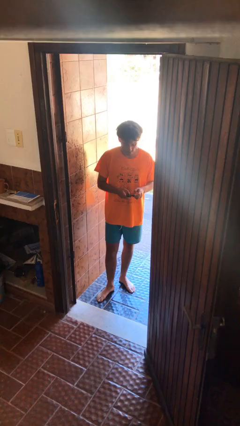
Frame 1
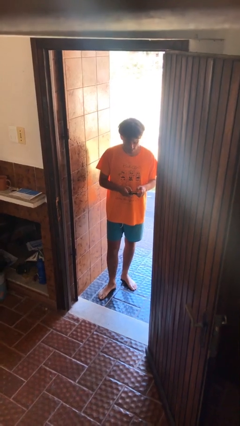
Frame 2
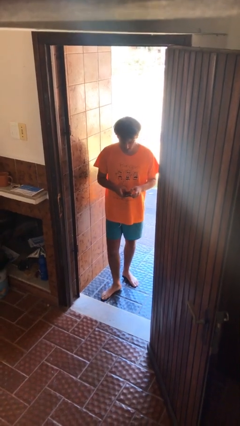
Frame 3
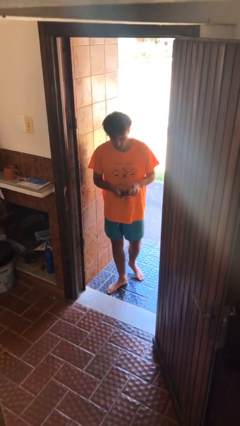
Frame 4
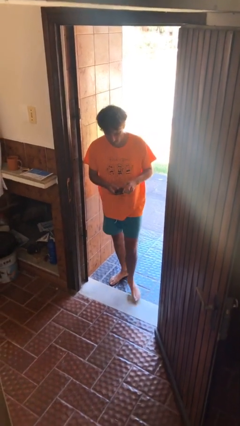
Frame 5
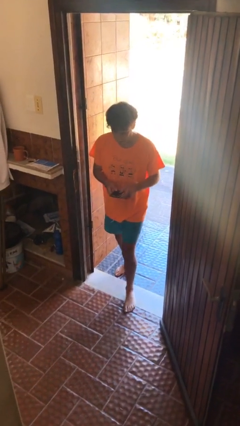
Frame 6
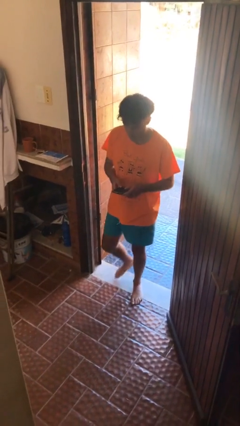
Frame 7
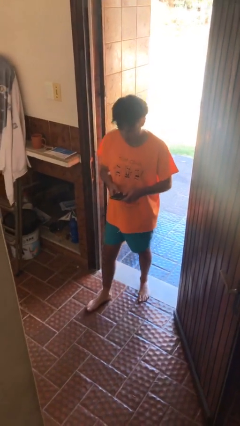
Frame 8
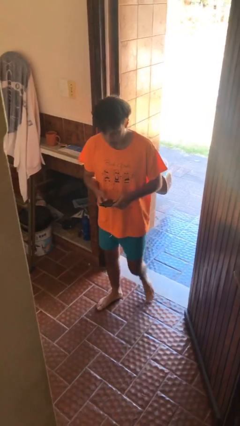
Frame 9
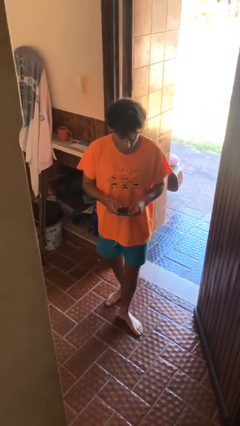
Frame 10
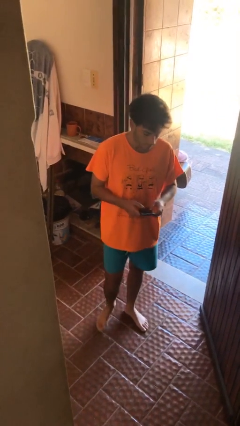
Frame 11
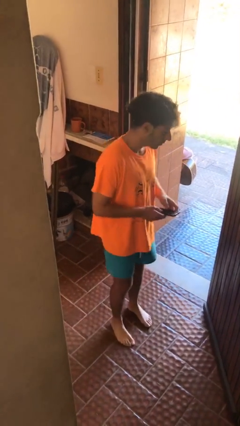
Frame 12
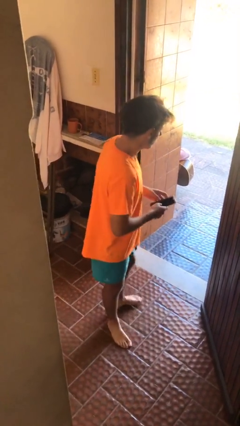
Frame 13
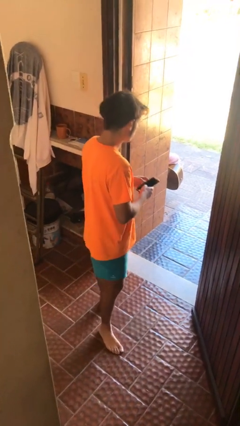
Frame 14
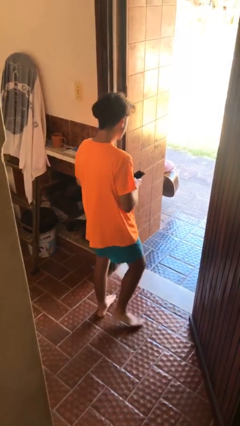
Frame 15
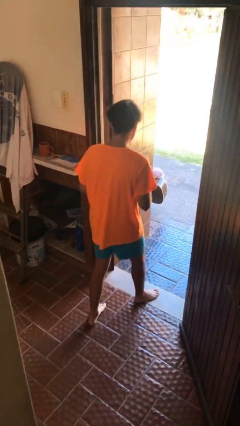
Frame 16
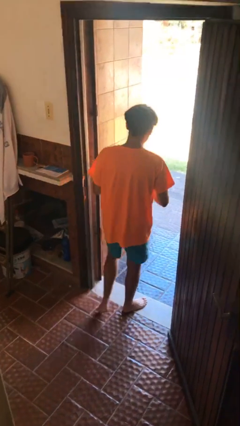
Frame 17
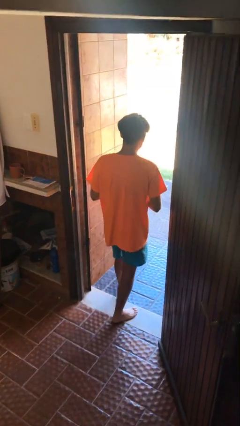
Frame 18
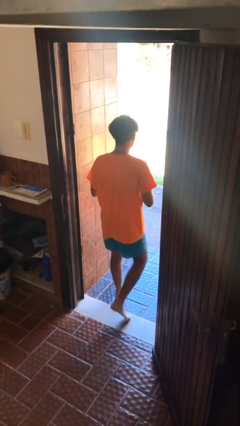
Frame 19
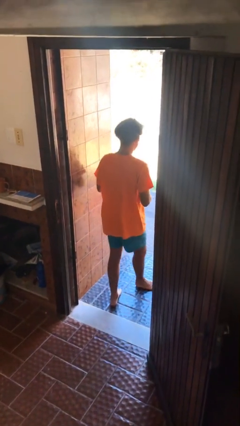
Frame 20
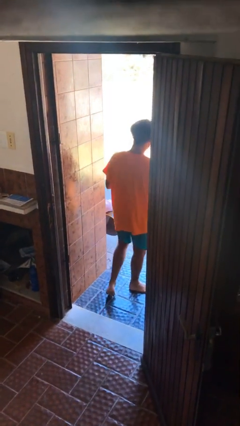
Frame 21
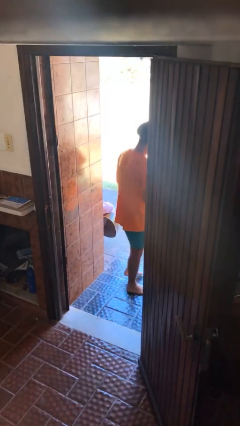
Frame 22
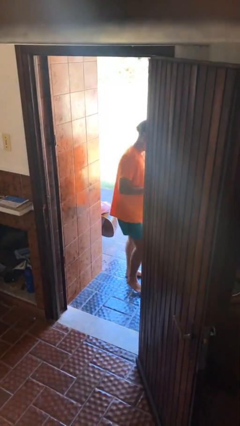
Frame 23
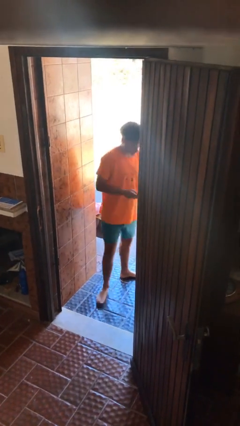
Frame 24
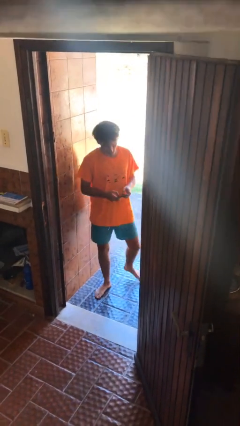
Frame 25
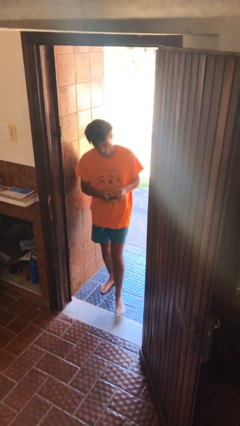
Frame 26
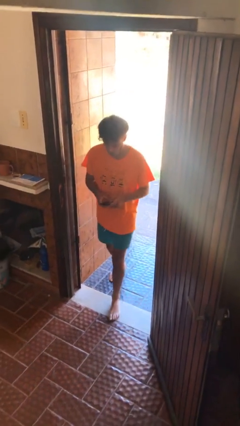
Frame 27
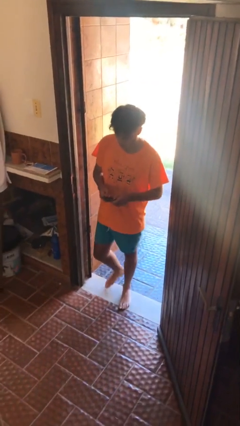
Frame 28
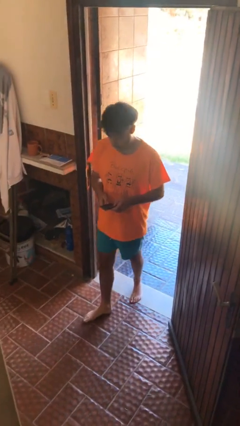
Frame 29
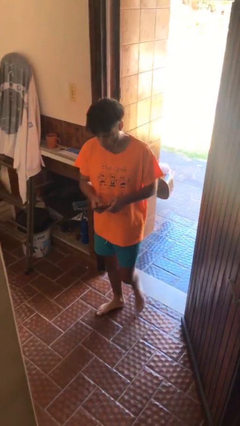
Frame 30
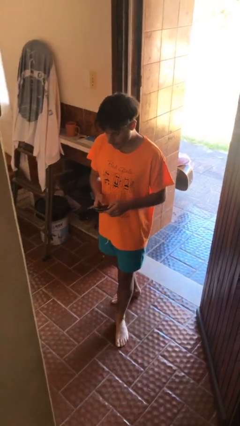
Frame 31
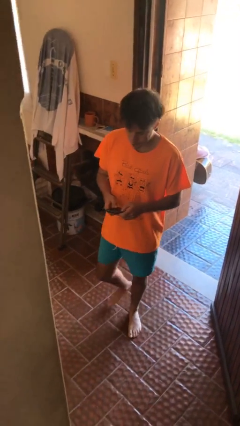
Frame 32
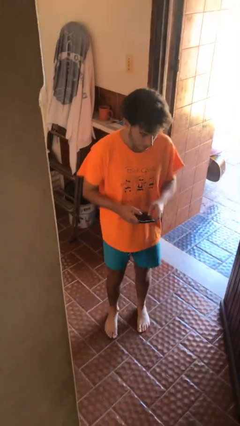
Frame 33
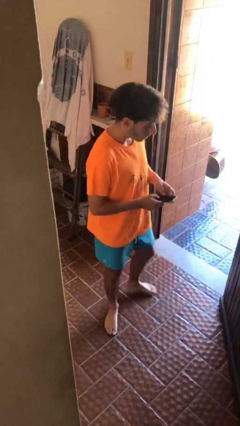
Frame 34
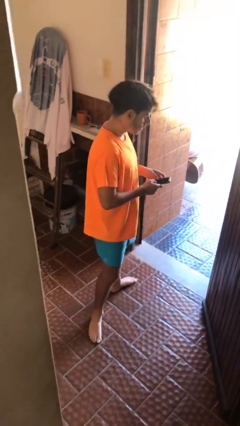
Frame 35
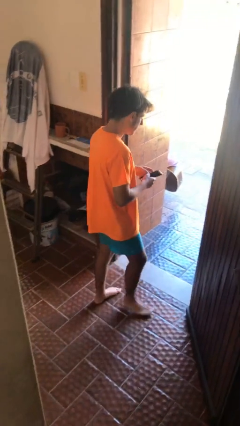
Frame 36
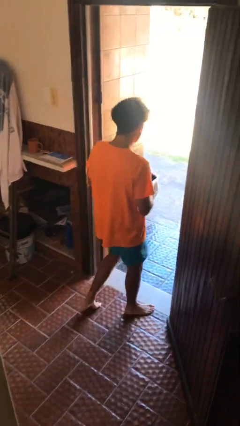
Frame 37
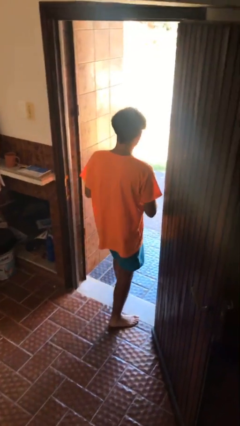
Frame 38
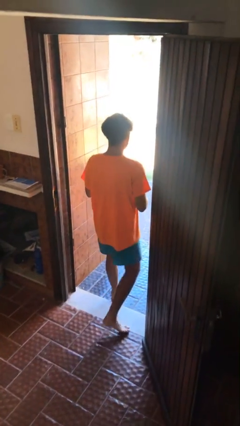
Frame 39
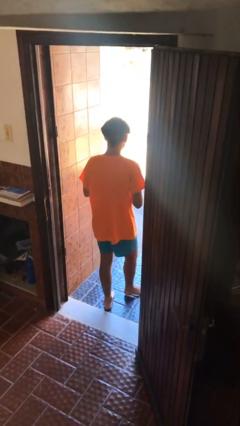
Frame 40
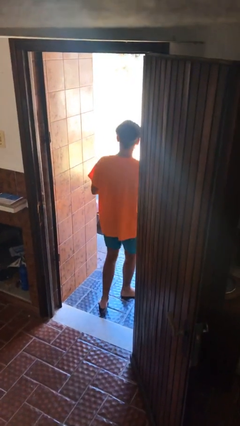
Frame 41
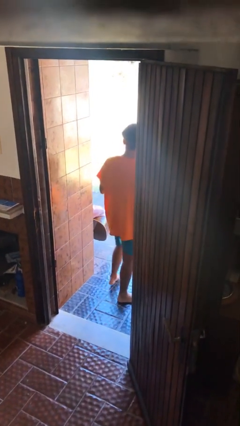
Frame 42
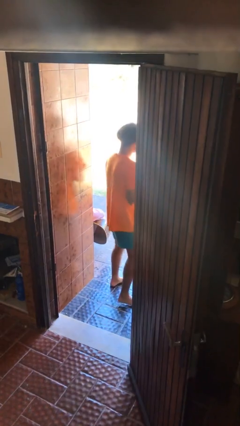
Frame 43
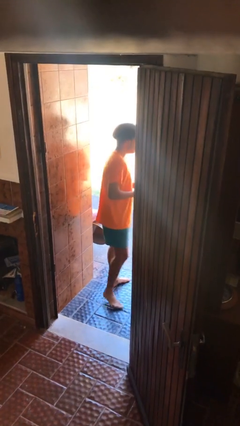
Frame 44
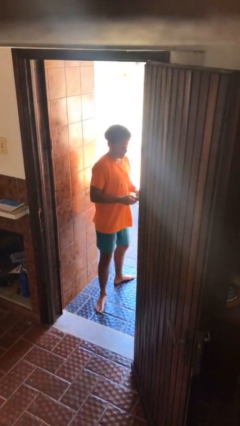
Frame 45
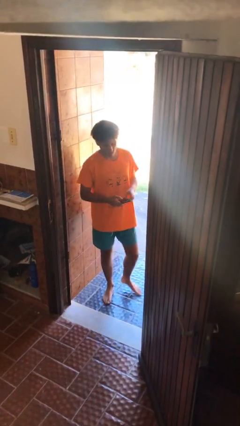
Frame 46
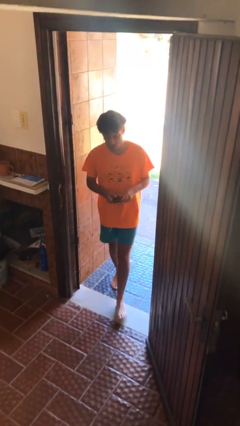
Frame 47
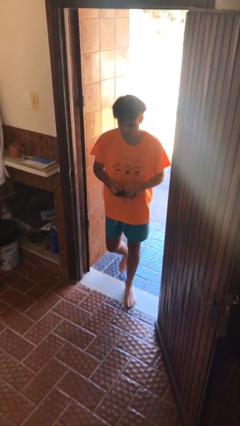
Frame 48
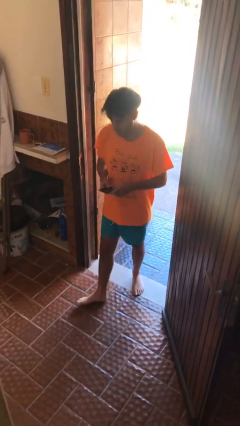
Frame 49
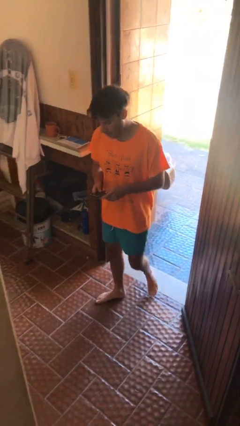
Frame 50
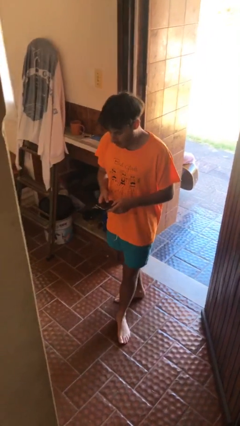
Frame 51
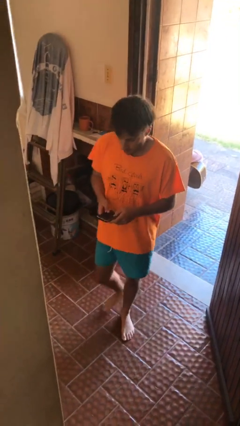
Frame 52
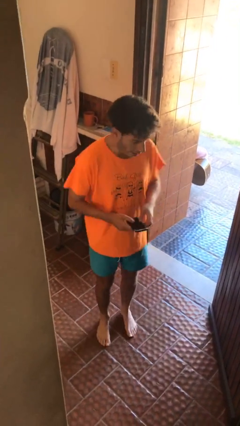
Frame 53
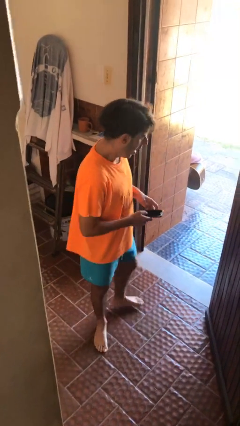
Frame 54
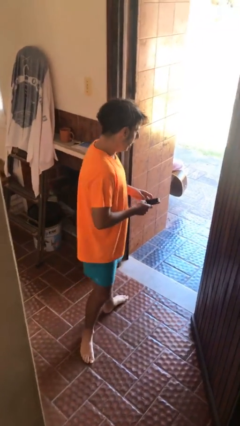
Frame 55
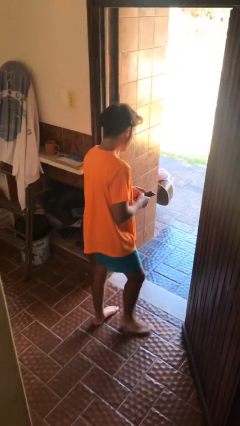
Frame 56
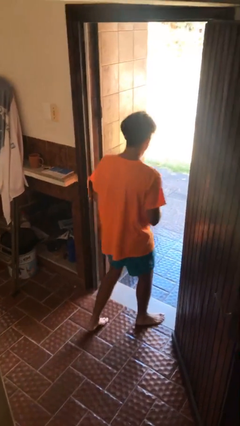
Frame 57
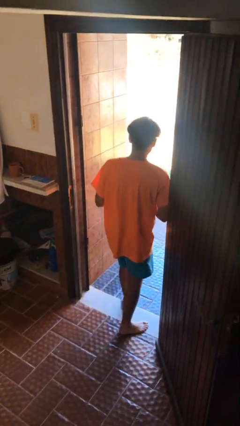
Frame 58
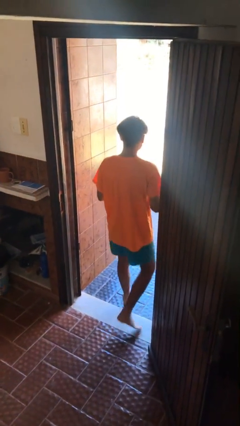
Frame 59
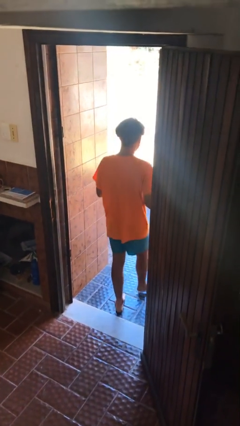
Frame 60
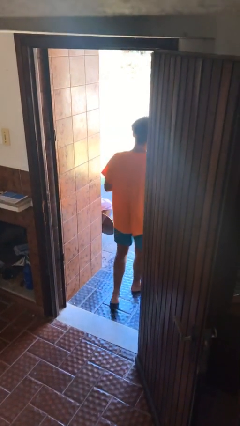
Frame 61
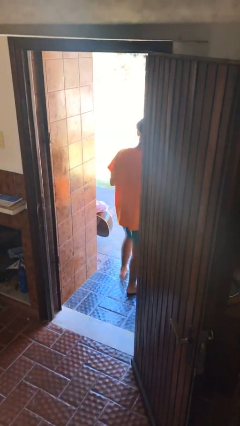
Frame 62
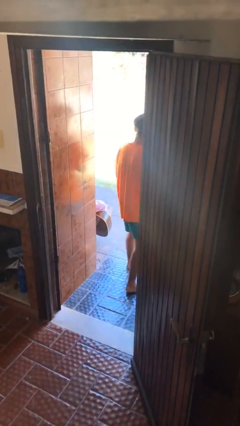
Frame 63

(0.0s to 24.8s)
person texts on phone

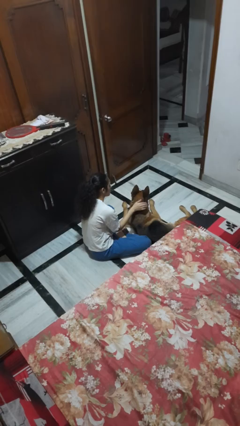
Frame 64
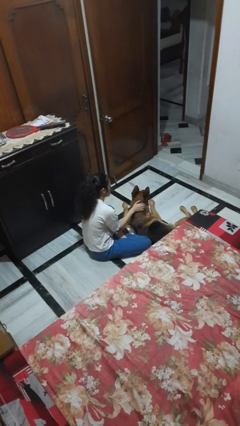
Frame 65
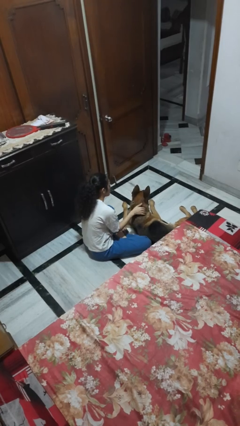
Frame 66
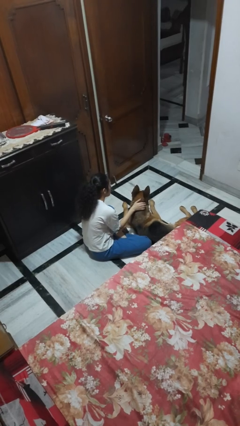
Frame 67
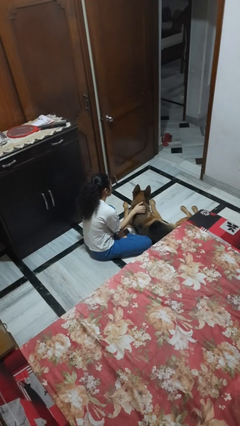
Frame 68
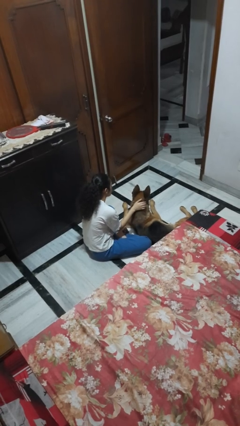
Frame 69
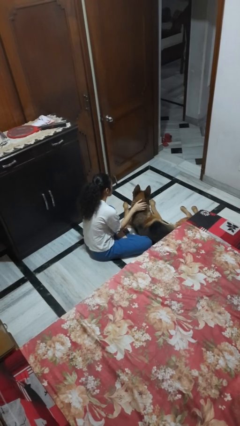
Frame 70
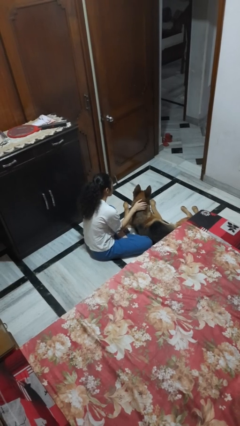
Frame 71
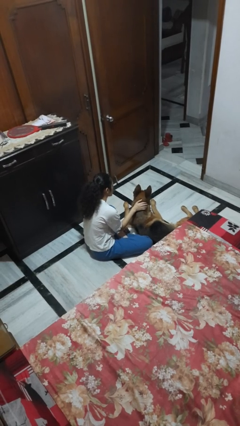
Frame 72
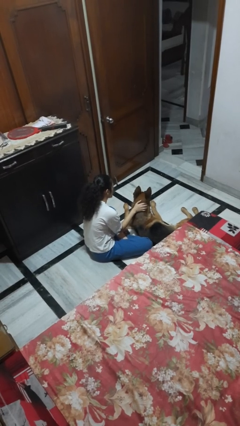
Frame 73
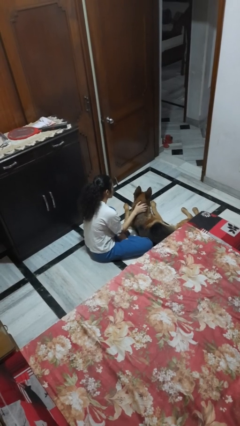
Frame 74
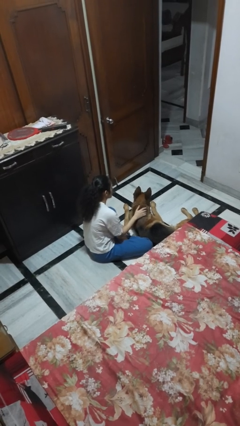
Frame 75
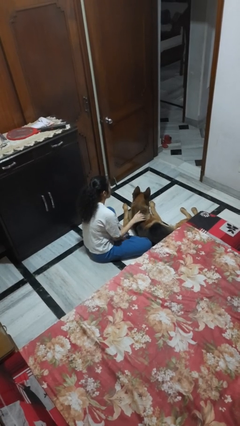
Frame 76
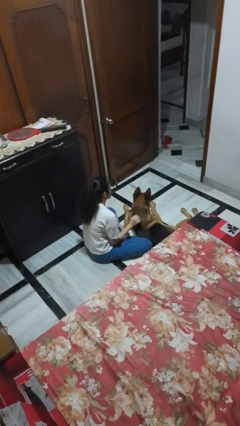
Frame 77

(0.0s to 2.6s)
person pets dog

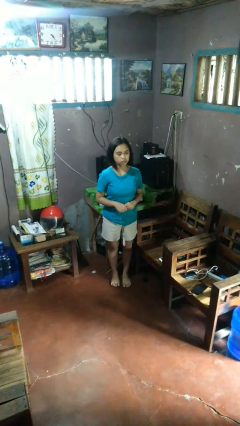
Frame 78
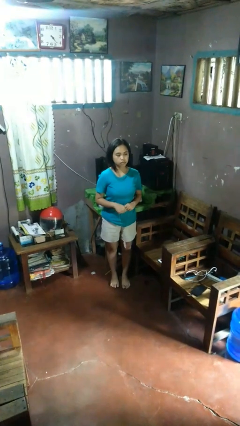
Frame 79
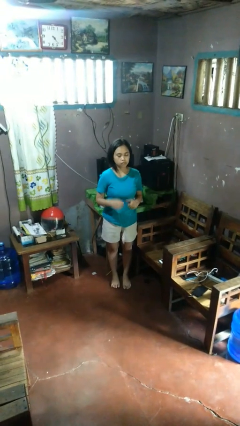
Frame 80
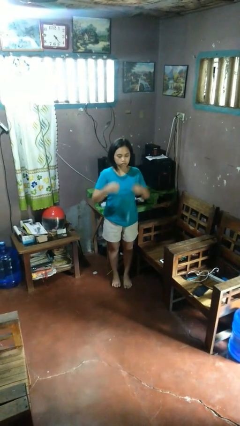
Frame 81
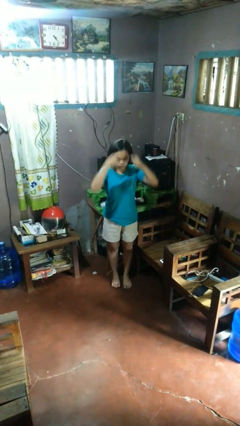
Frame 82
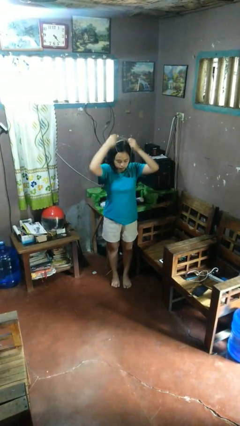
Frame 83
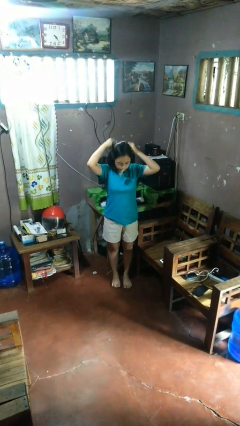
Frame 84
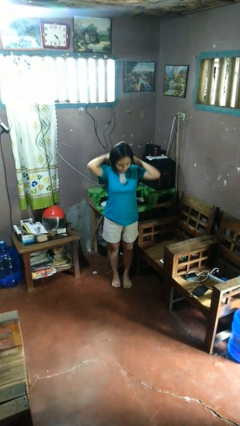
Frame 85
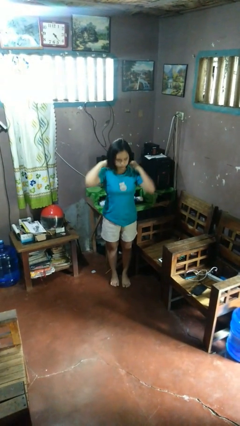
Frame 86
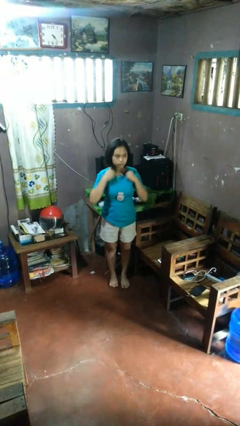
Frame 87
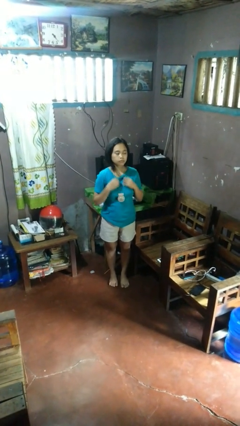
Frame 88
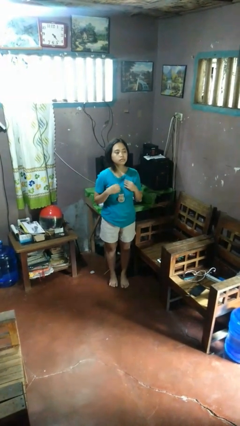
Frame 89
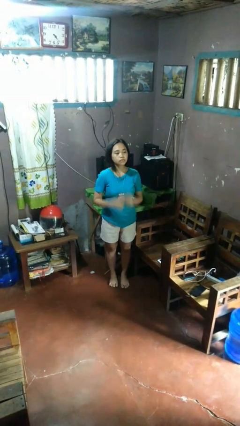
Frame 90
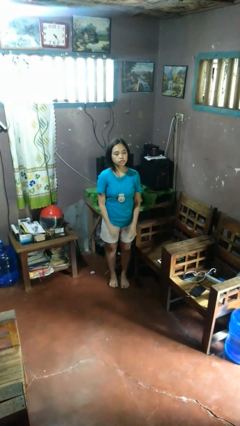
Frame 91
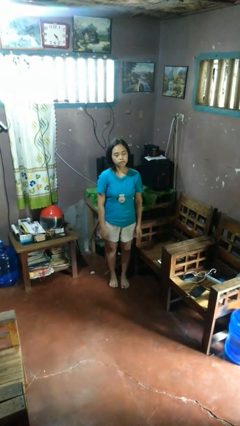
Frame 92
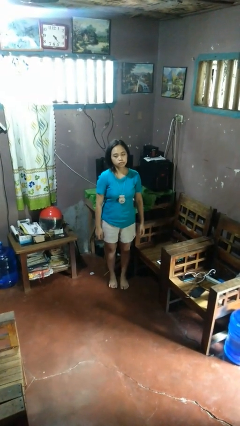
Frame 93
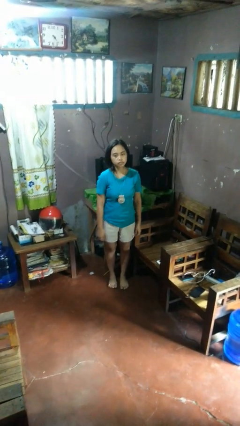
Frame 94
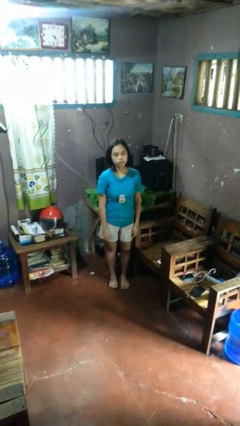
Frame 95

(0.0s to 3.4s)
person puts on necklace
